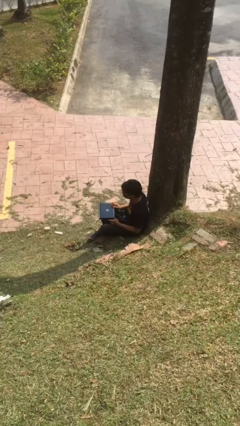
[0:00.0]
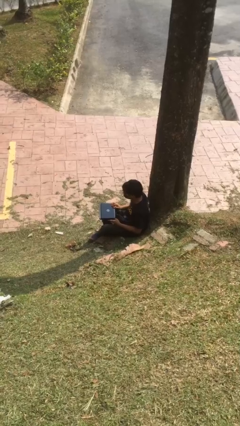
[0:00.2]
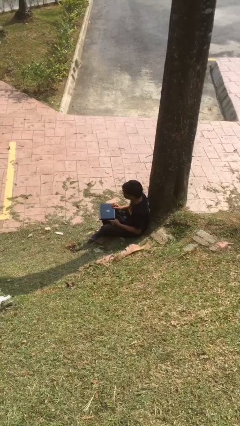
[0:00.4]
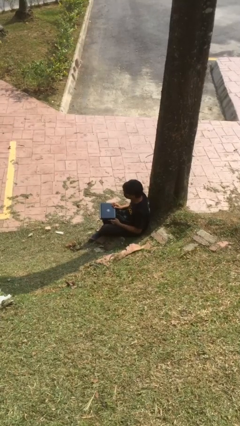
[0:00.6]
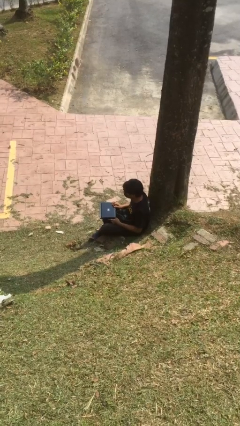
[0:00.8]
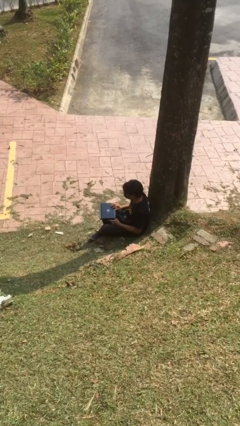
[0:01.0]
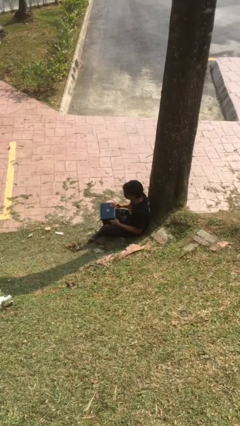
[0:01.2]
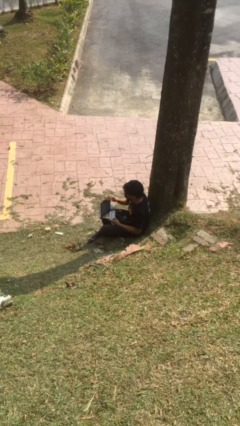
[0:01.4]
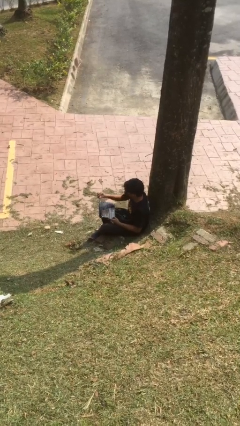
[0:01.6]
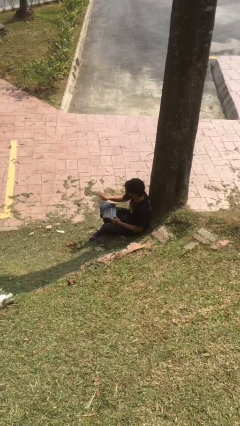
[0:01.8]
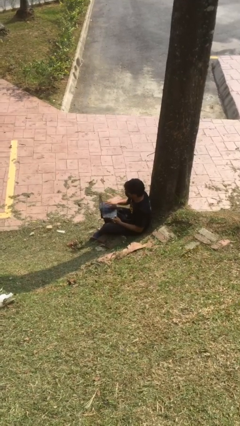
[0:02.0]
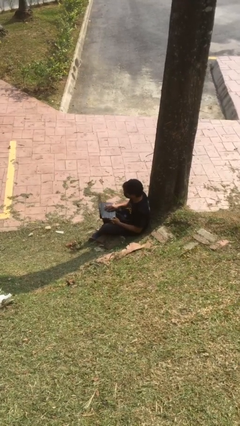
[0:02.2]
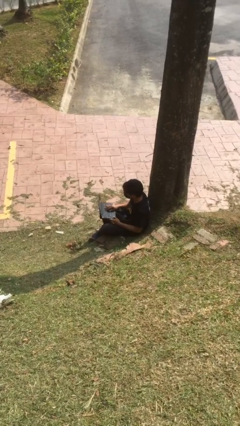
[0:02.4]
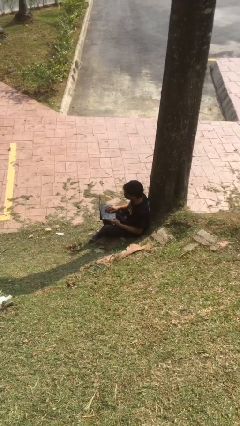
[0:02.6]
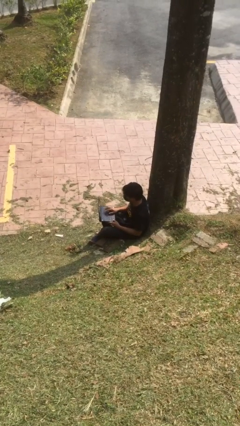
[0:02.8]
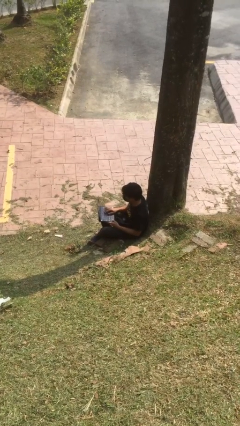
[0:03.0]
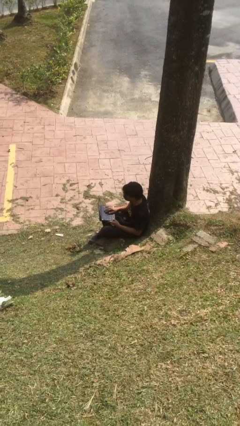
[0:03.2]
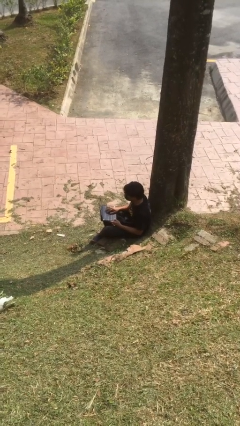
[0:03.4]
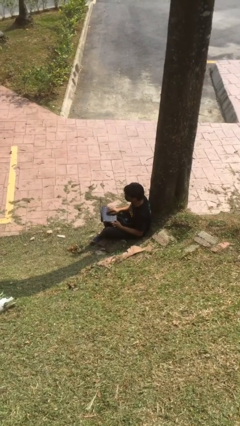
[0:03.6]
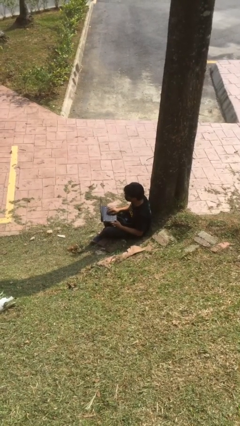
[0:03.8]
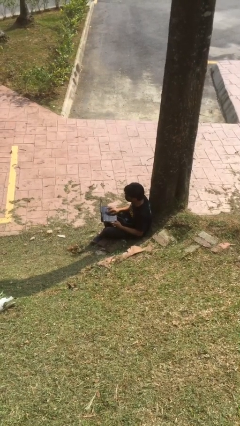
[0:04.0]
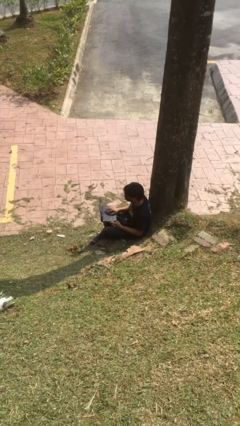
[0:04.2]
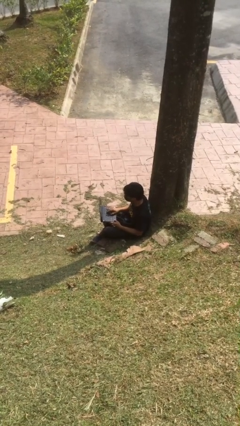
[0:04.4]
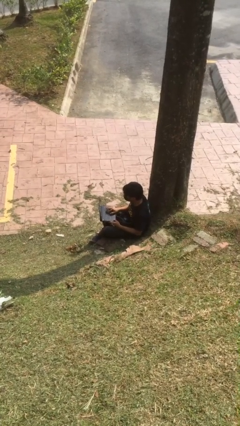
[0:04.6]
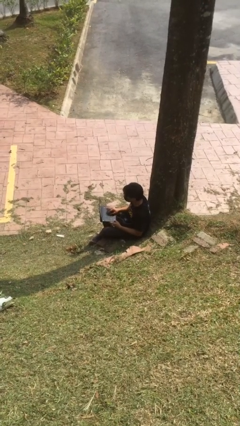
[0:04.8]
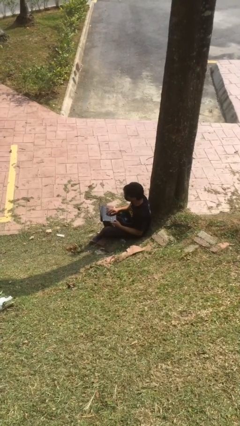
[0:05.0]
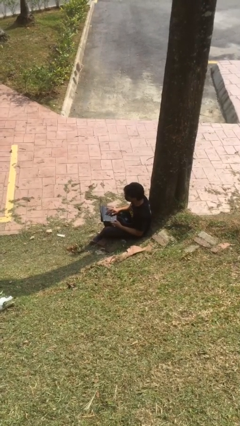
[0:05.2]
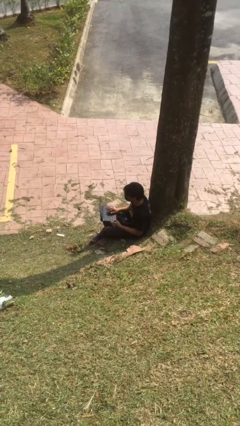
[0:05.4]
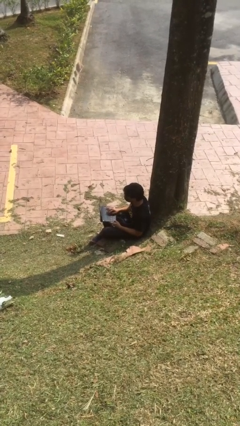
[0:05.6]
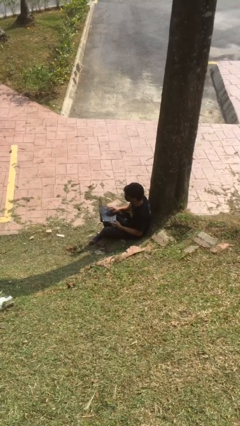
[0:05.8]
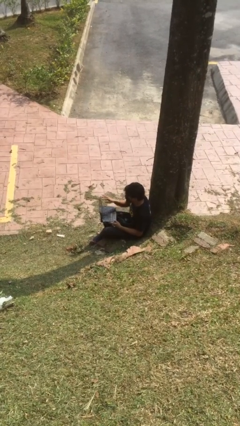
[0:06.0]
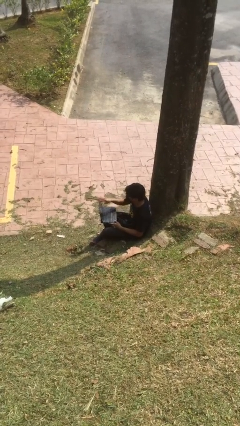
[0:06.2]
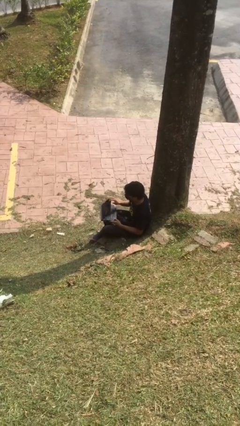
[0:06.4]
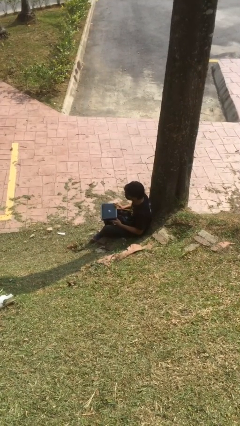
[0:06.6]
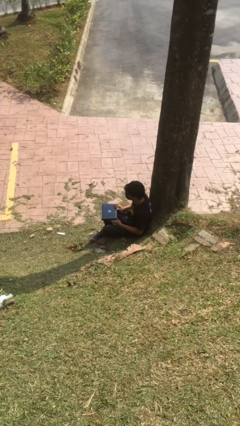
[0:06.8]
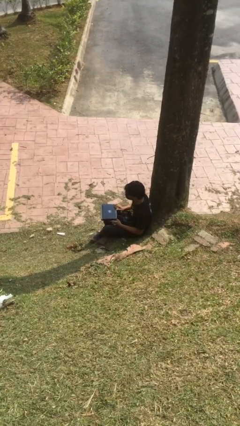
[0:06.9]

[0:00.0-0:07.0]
person interacts with laptop

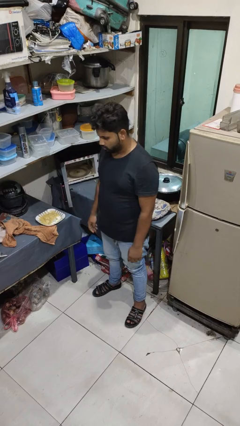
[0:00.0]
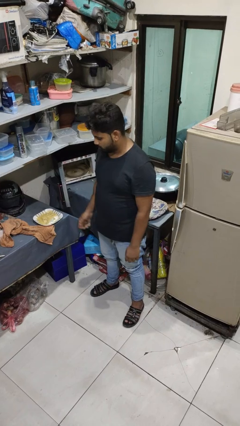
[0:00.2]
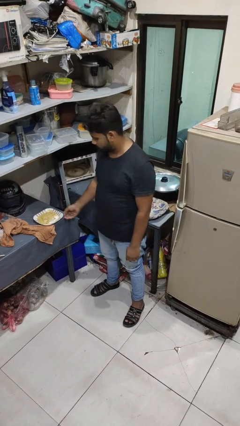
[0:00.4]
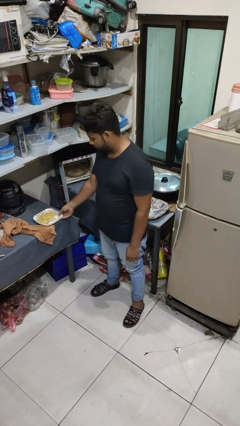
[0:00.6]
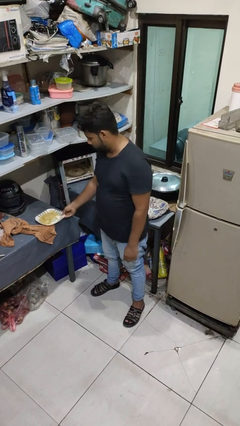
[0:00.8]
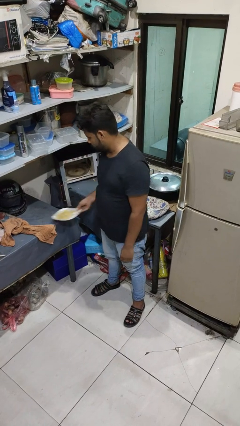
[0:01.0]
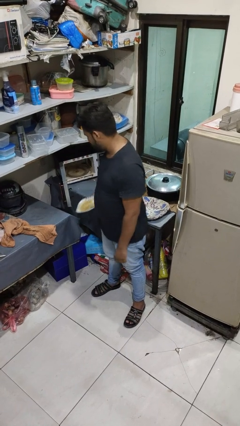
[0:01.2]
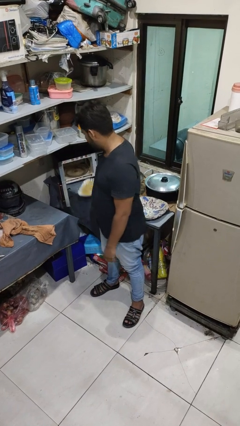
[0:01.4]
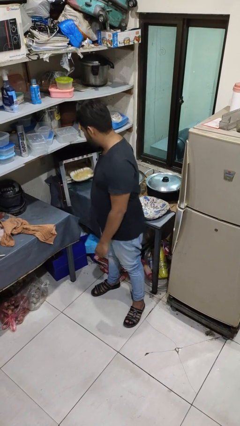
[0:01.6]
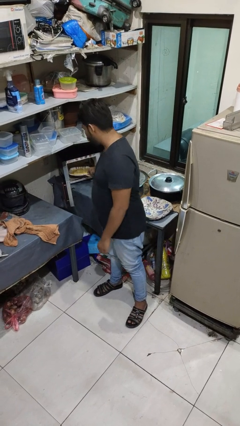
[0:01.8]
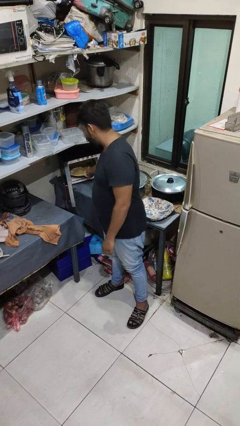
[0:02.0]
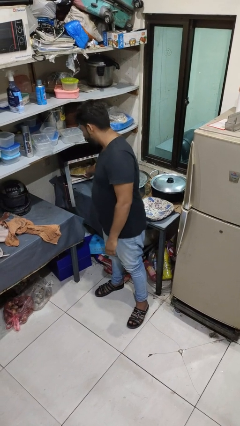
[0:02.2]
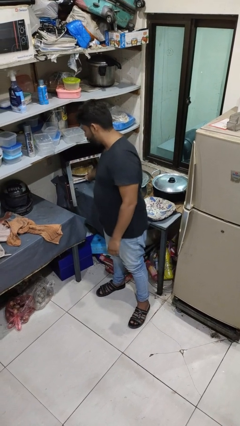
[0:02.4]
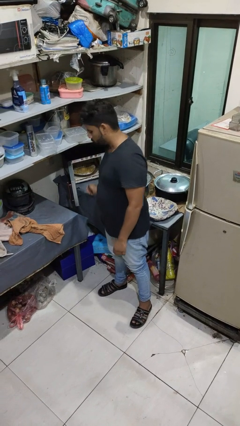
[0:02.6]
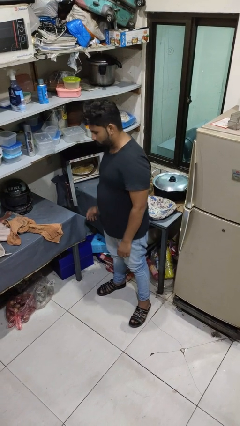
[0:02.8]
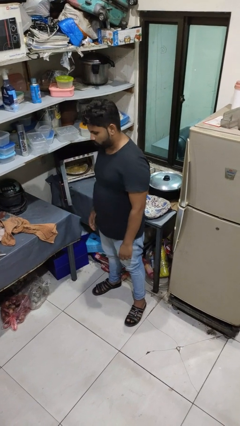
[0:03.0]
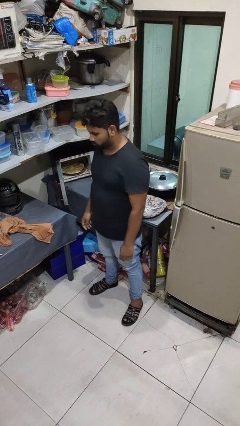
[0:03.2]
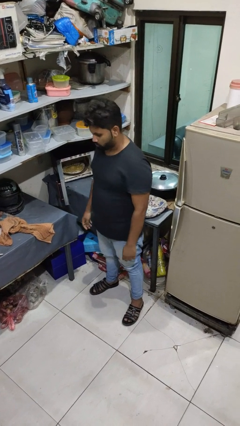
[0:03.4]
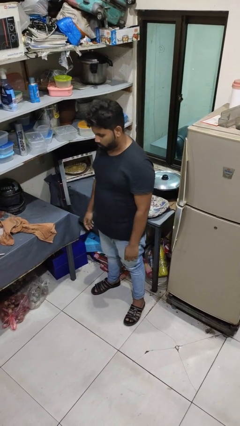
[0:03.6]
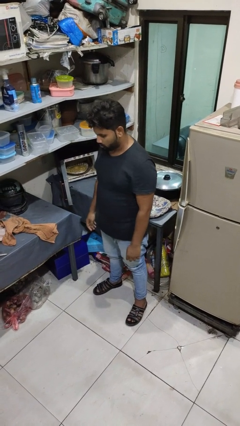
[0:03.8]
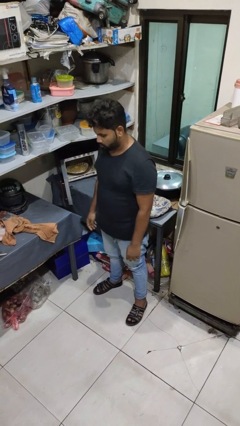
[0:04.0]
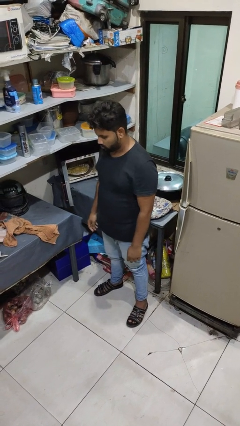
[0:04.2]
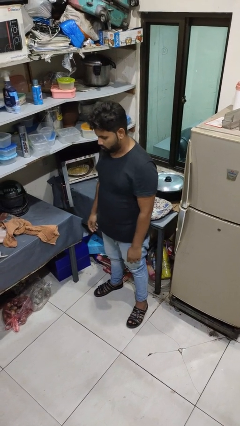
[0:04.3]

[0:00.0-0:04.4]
person puts object into microwave

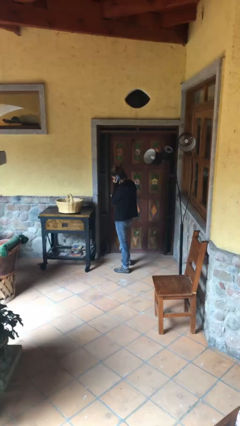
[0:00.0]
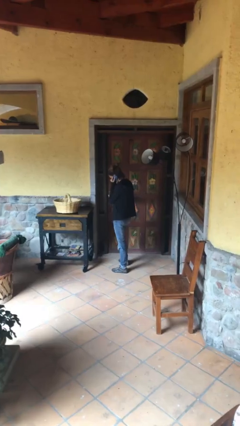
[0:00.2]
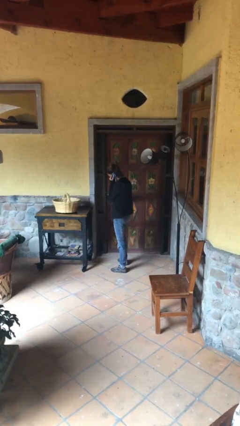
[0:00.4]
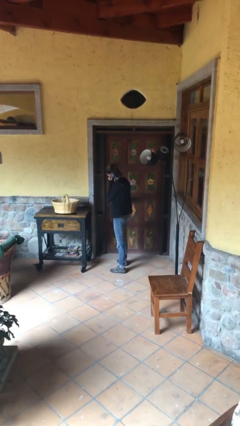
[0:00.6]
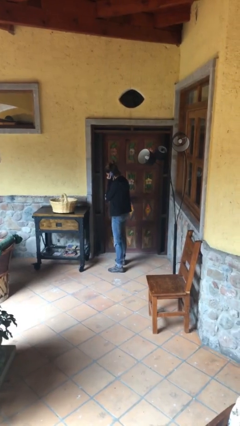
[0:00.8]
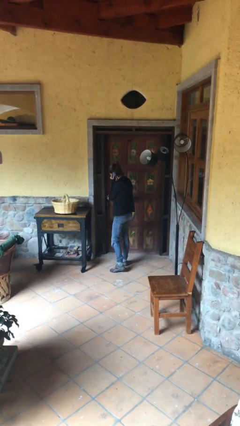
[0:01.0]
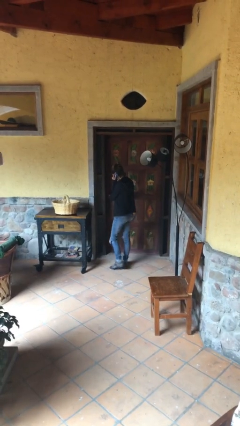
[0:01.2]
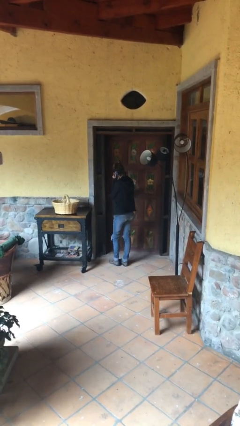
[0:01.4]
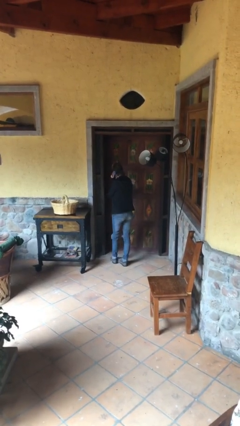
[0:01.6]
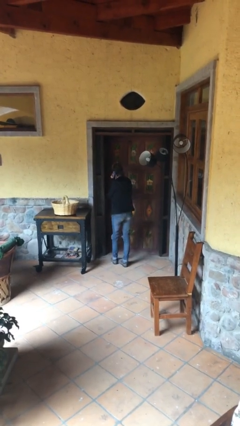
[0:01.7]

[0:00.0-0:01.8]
person opens facility door

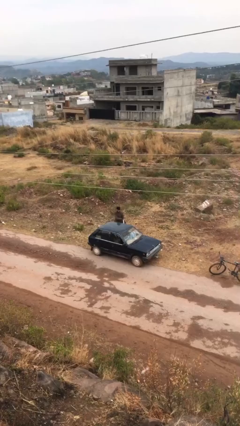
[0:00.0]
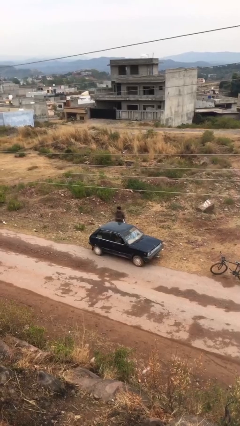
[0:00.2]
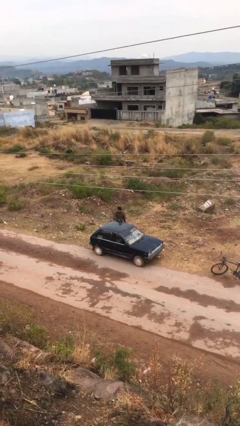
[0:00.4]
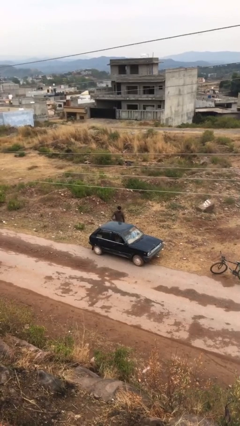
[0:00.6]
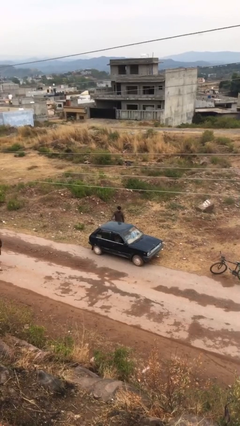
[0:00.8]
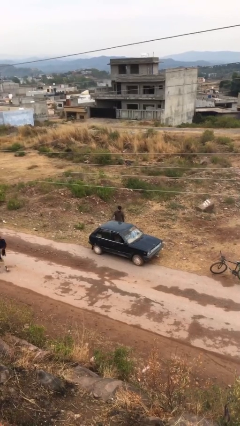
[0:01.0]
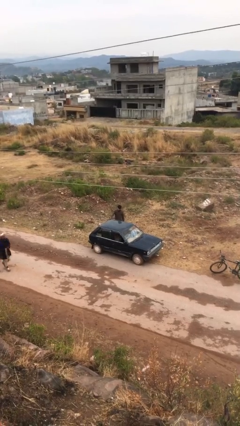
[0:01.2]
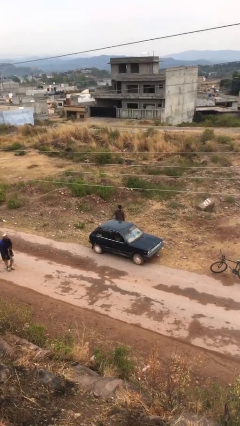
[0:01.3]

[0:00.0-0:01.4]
person closes car door

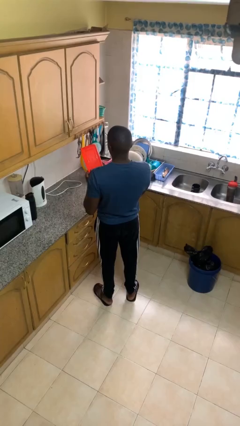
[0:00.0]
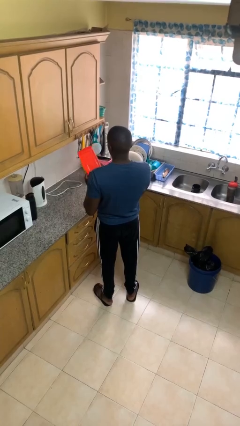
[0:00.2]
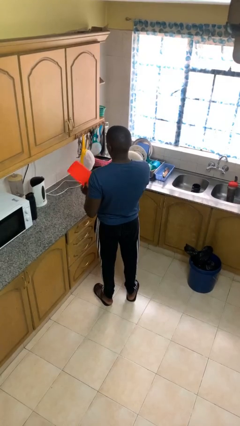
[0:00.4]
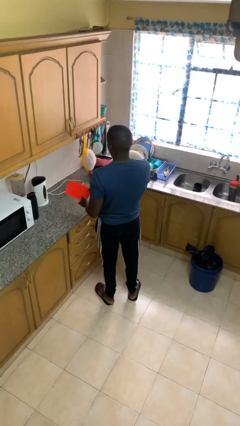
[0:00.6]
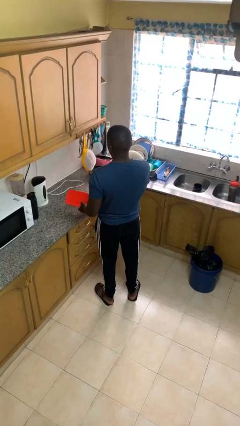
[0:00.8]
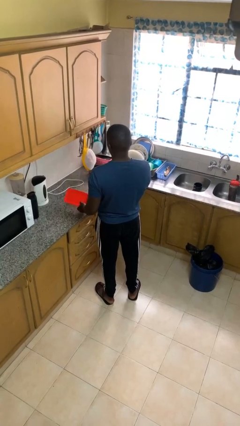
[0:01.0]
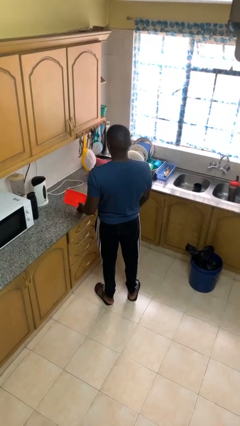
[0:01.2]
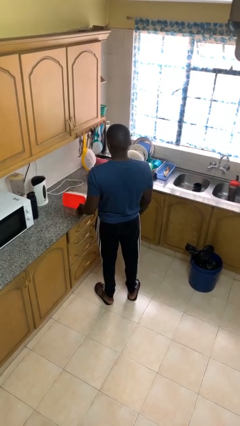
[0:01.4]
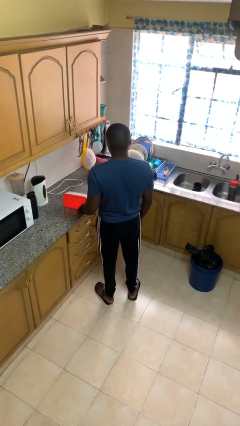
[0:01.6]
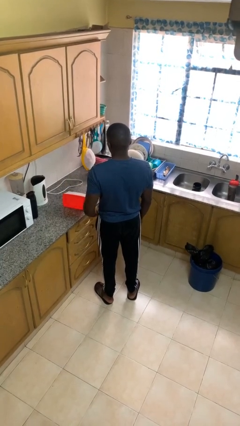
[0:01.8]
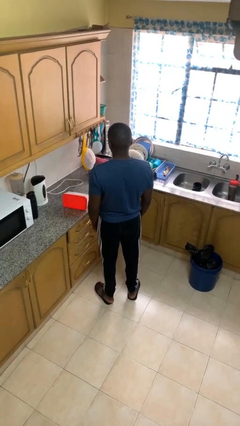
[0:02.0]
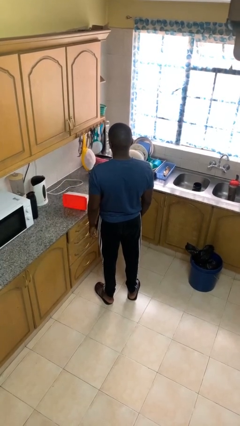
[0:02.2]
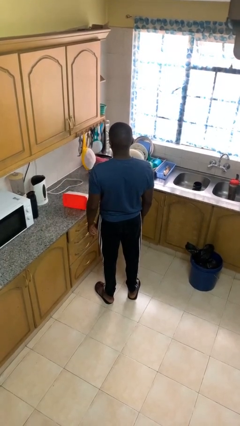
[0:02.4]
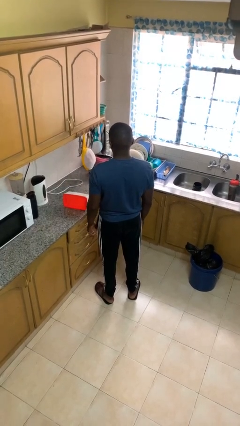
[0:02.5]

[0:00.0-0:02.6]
person puts down object on countertop

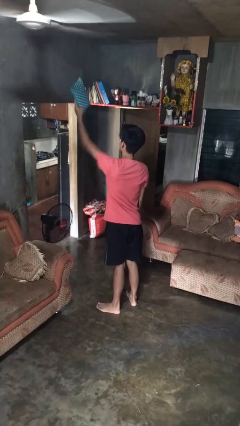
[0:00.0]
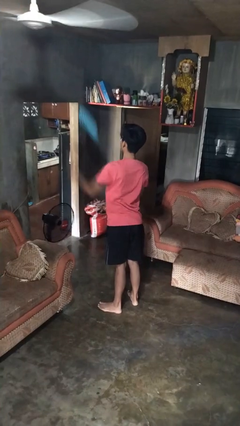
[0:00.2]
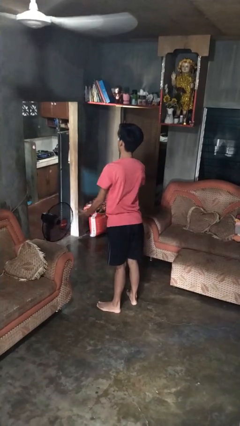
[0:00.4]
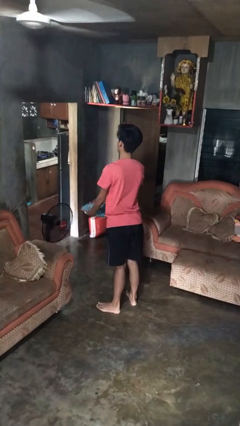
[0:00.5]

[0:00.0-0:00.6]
person drops object
